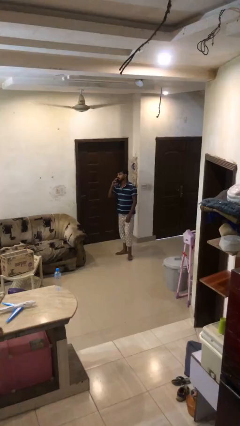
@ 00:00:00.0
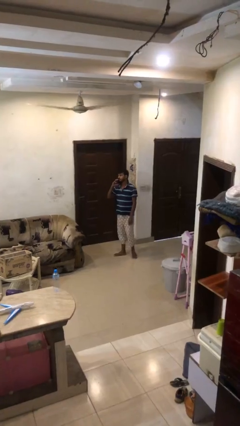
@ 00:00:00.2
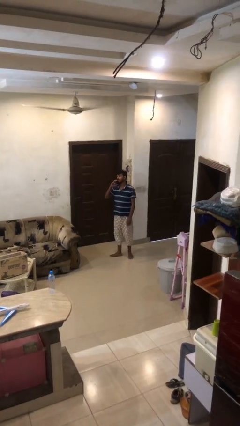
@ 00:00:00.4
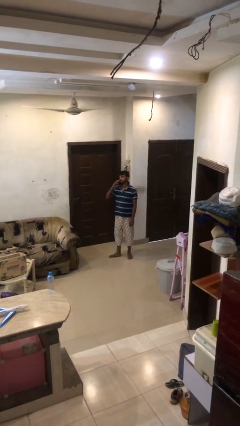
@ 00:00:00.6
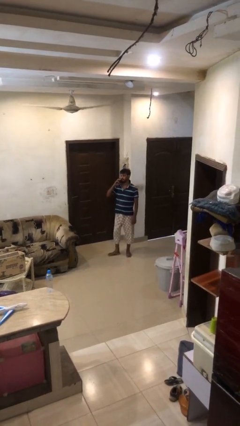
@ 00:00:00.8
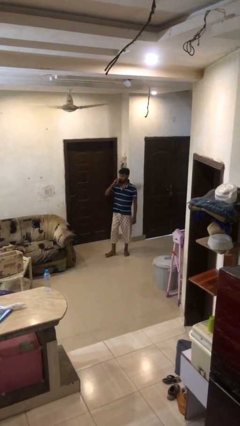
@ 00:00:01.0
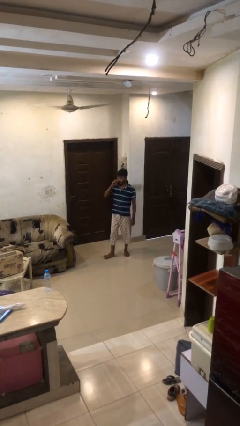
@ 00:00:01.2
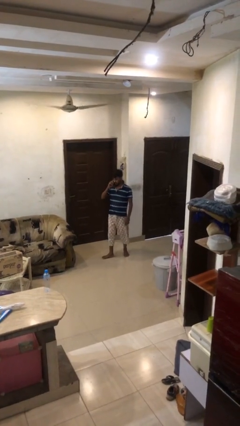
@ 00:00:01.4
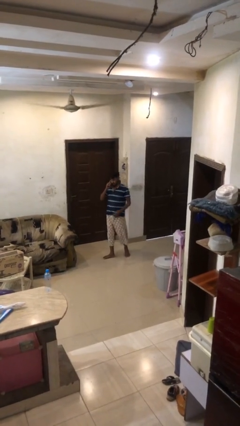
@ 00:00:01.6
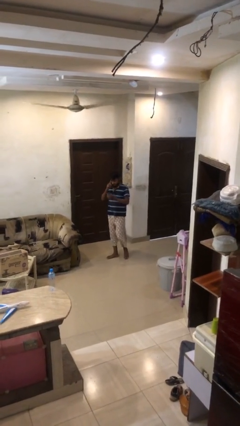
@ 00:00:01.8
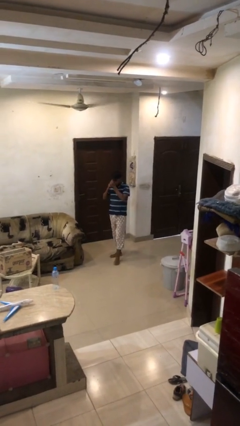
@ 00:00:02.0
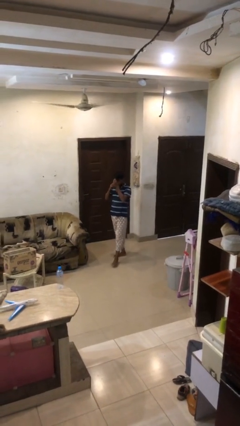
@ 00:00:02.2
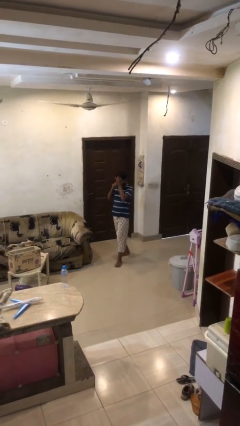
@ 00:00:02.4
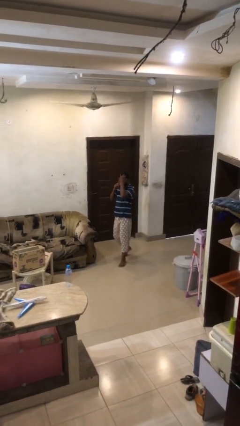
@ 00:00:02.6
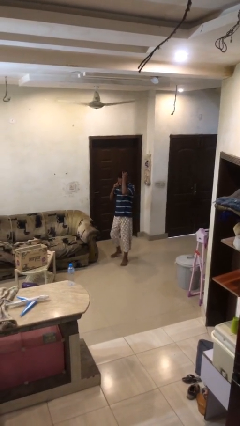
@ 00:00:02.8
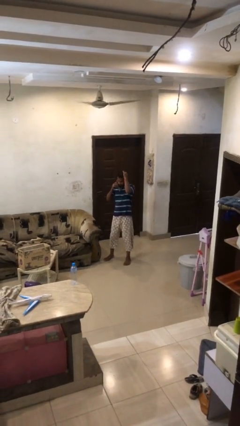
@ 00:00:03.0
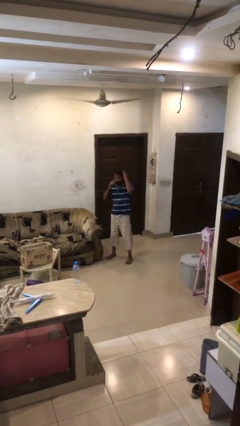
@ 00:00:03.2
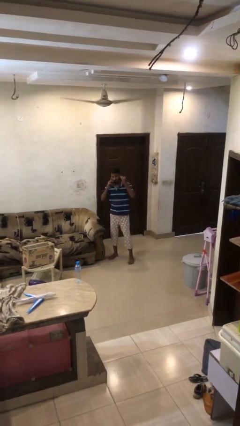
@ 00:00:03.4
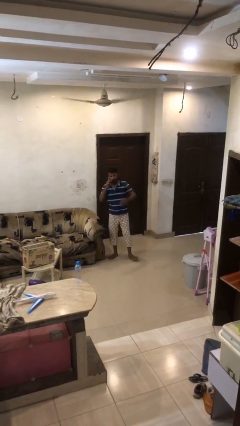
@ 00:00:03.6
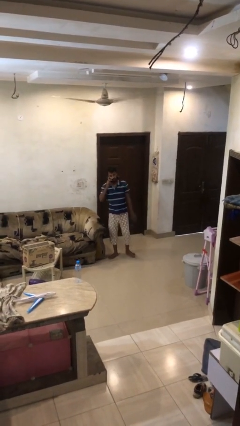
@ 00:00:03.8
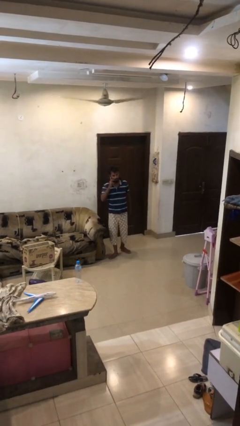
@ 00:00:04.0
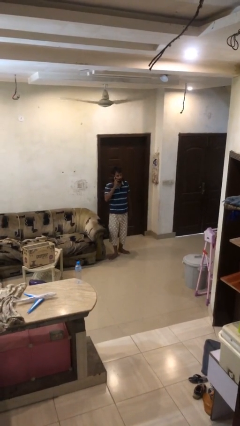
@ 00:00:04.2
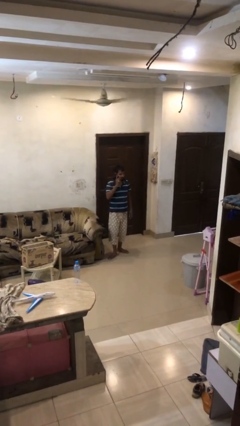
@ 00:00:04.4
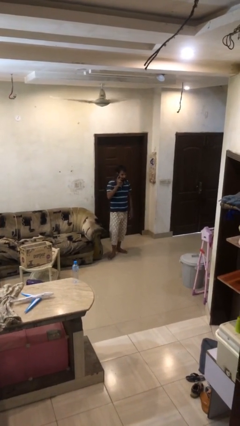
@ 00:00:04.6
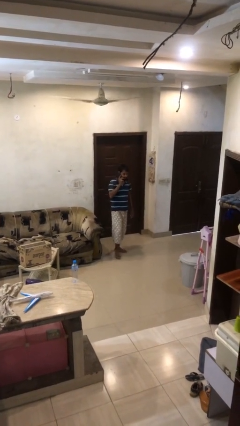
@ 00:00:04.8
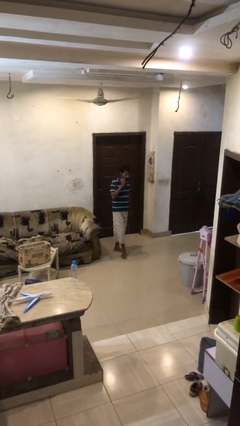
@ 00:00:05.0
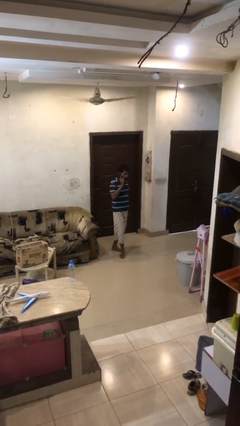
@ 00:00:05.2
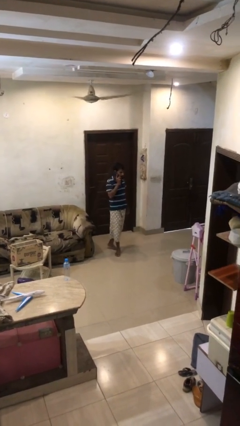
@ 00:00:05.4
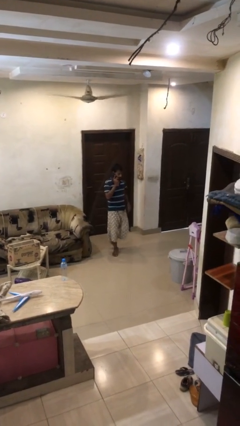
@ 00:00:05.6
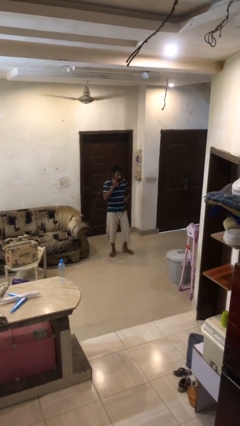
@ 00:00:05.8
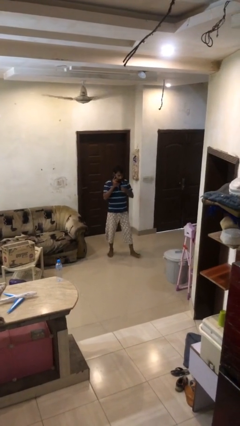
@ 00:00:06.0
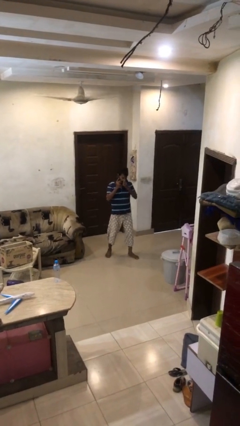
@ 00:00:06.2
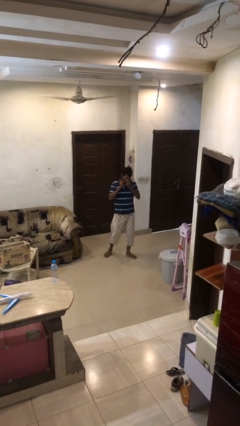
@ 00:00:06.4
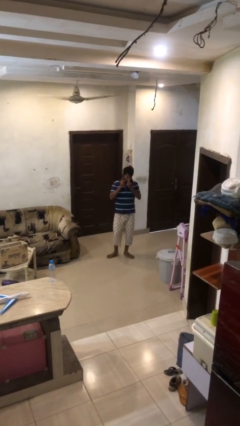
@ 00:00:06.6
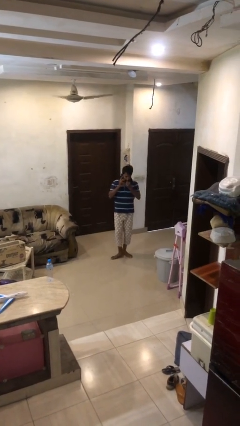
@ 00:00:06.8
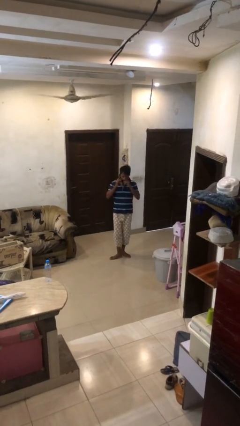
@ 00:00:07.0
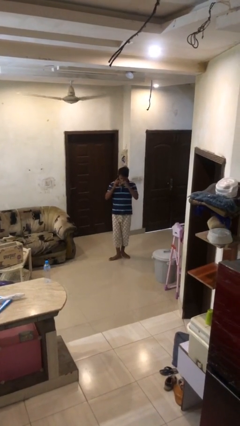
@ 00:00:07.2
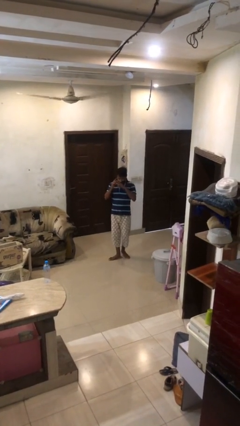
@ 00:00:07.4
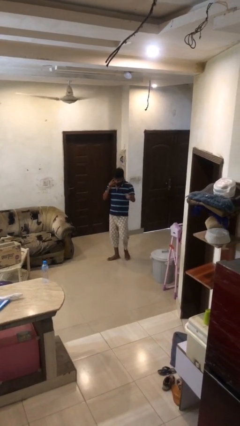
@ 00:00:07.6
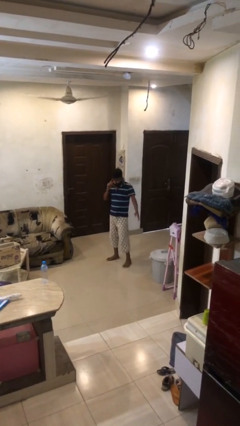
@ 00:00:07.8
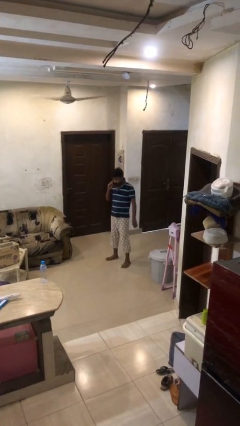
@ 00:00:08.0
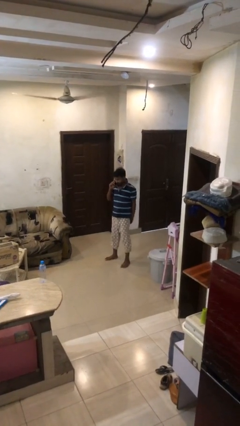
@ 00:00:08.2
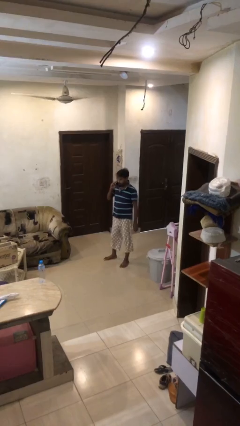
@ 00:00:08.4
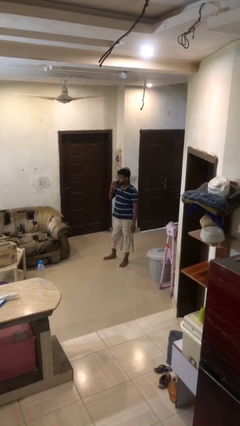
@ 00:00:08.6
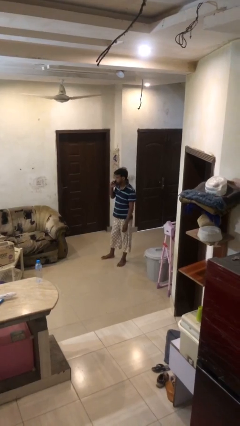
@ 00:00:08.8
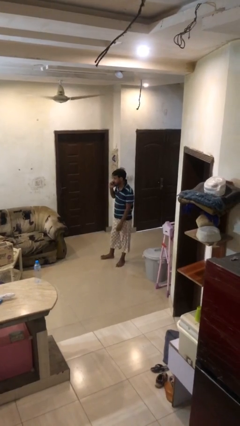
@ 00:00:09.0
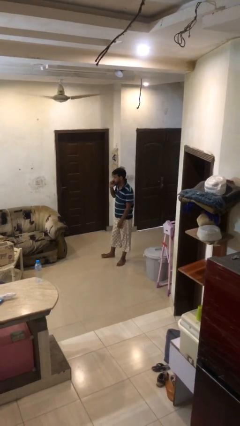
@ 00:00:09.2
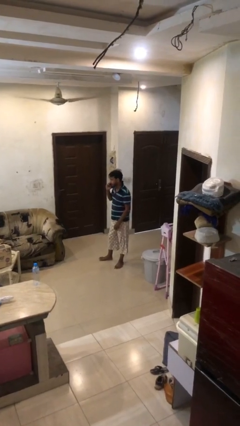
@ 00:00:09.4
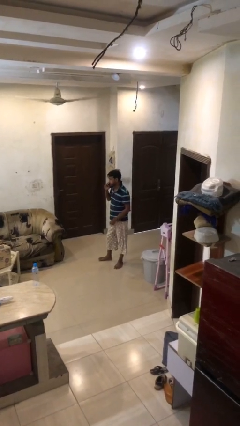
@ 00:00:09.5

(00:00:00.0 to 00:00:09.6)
person talks on phone

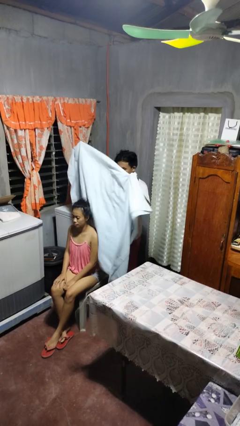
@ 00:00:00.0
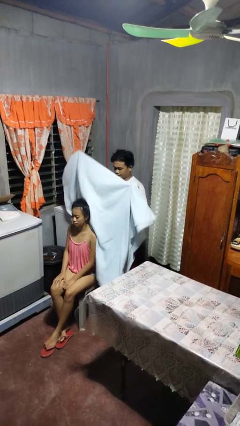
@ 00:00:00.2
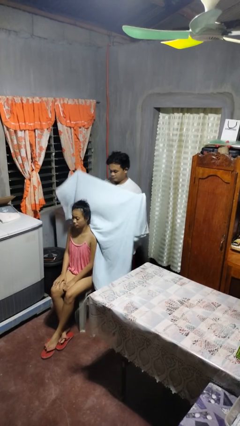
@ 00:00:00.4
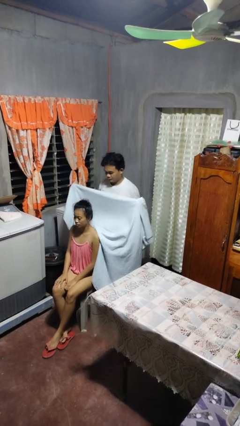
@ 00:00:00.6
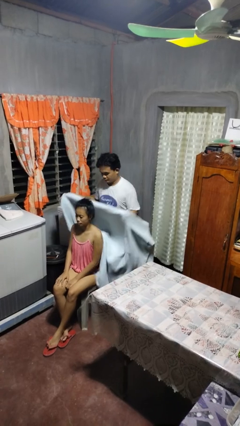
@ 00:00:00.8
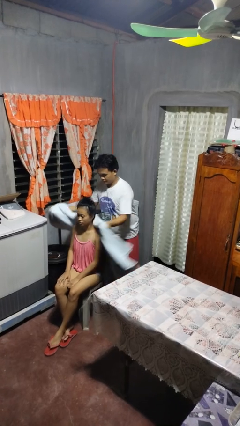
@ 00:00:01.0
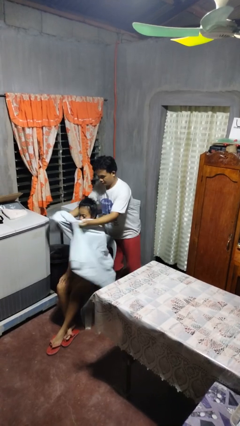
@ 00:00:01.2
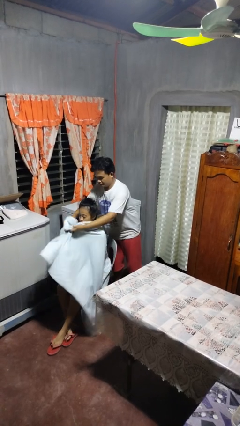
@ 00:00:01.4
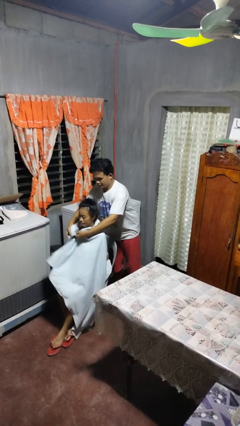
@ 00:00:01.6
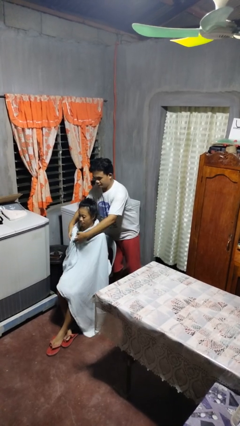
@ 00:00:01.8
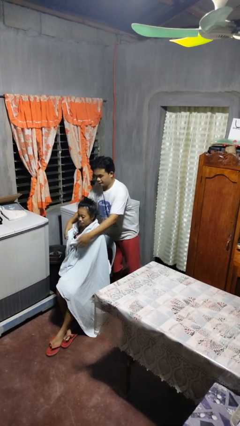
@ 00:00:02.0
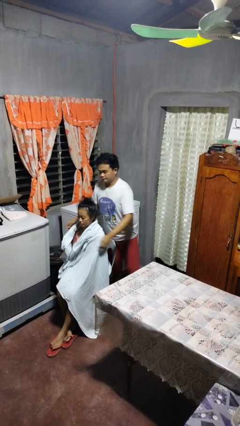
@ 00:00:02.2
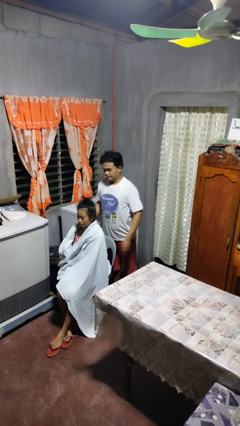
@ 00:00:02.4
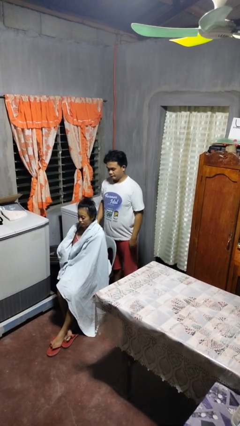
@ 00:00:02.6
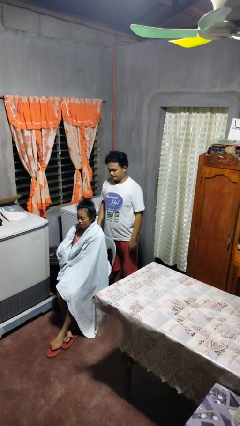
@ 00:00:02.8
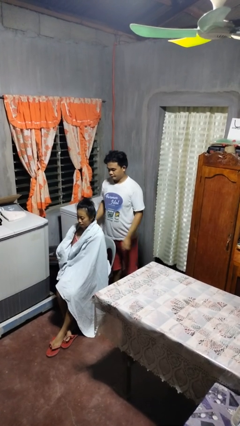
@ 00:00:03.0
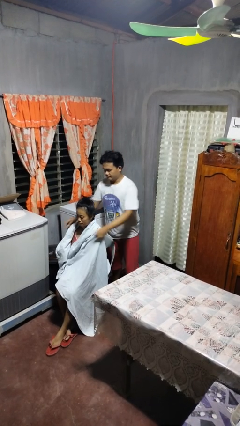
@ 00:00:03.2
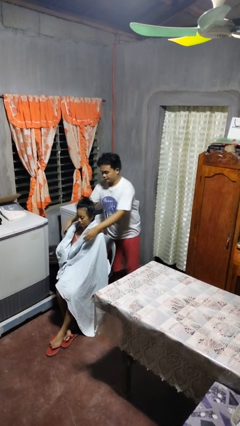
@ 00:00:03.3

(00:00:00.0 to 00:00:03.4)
person covers friend with blanket

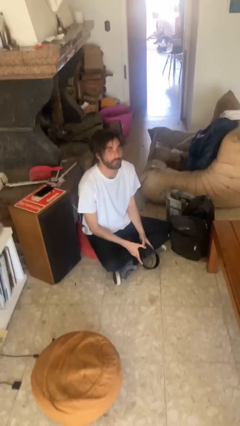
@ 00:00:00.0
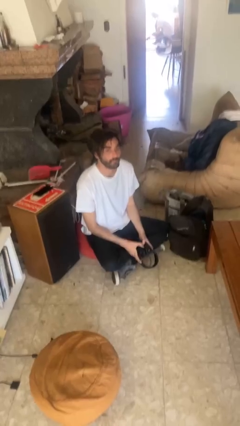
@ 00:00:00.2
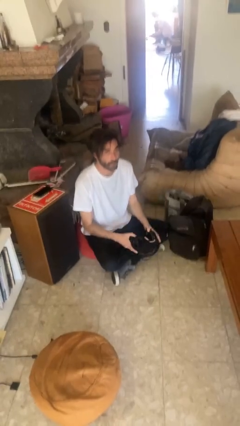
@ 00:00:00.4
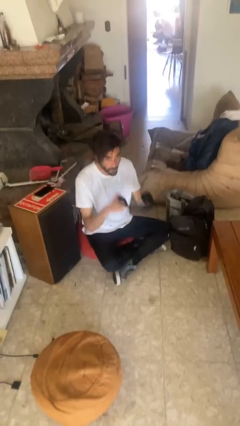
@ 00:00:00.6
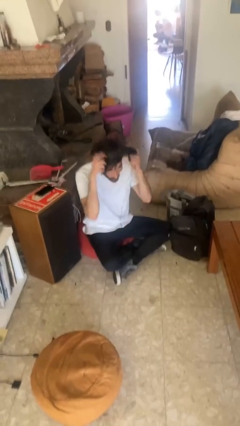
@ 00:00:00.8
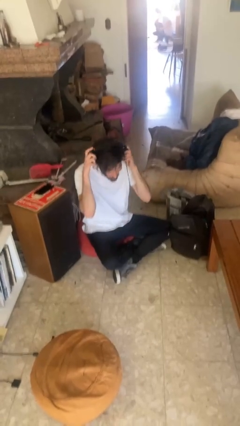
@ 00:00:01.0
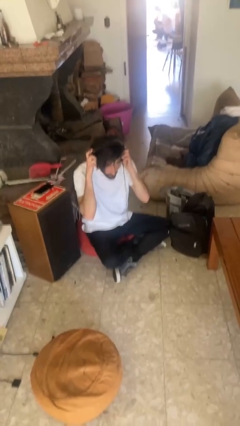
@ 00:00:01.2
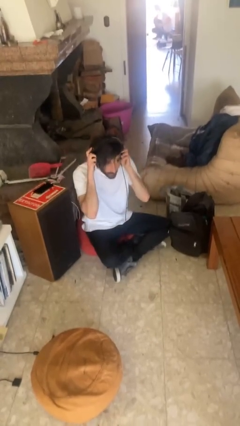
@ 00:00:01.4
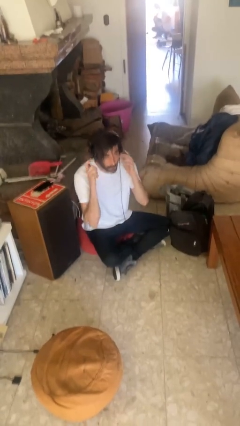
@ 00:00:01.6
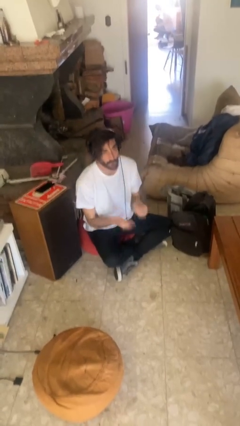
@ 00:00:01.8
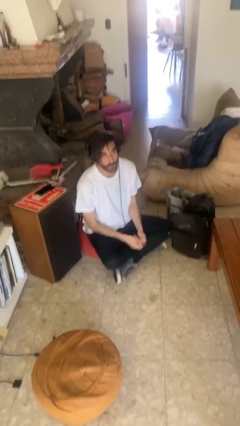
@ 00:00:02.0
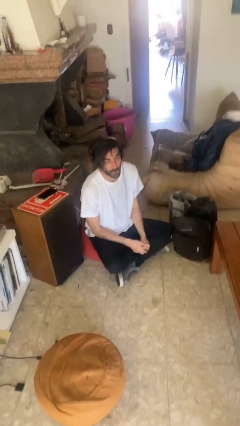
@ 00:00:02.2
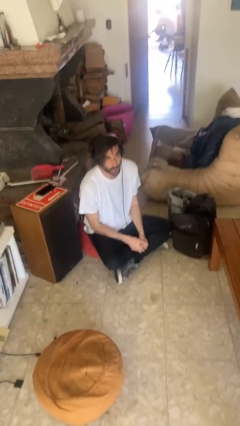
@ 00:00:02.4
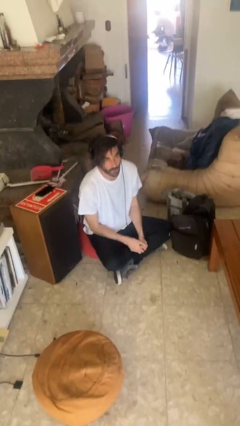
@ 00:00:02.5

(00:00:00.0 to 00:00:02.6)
person puts on headphones

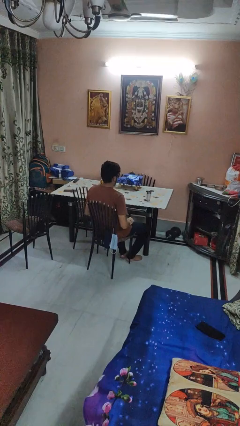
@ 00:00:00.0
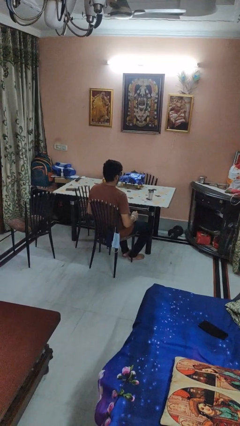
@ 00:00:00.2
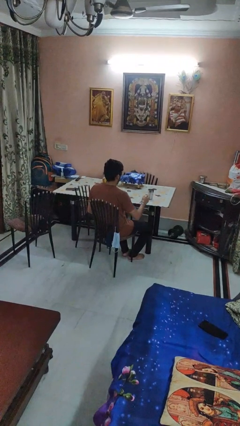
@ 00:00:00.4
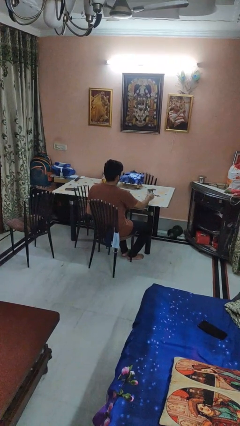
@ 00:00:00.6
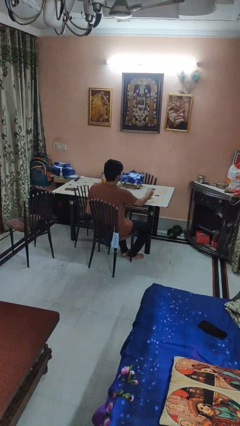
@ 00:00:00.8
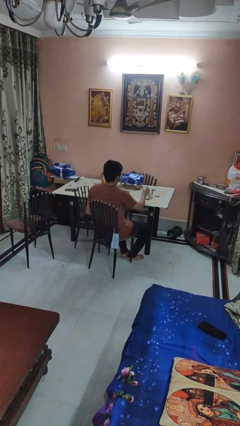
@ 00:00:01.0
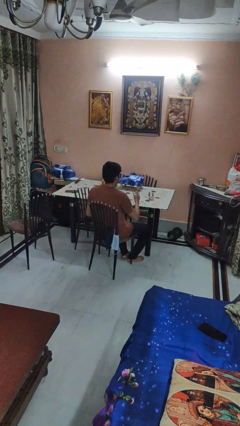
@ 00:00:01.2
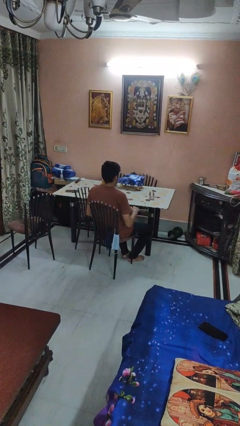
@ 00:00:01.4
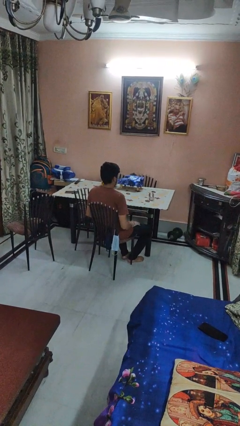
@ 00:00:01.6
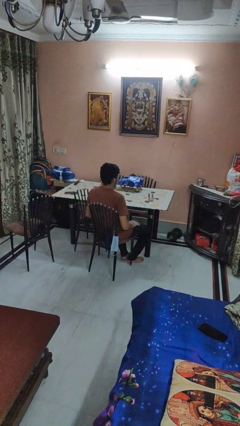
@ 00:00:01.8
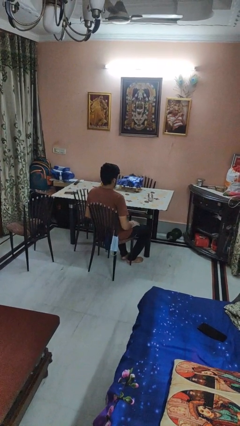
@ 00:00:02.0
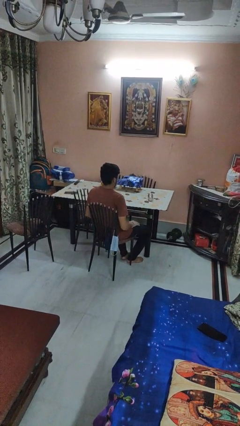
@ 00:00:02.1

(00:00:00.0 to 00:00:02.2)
person knocks over glass
